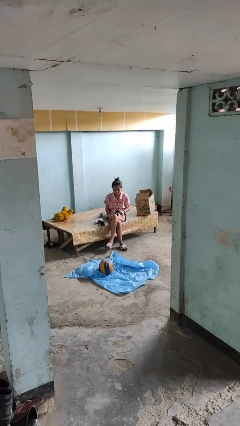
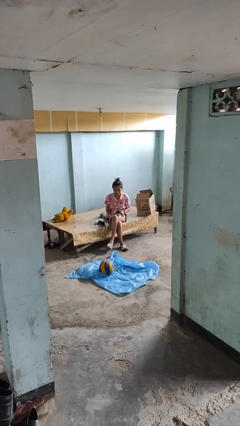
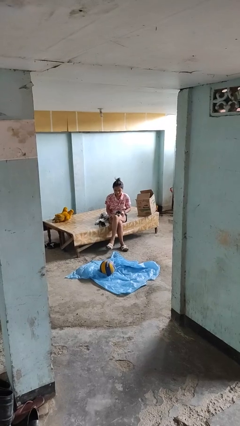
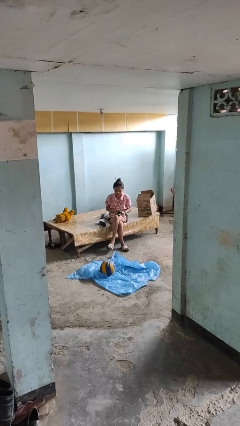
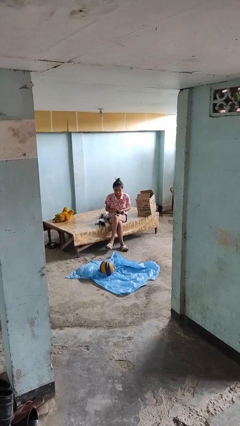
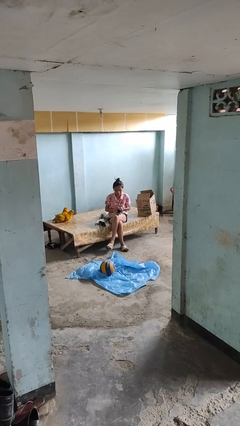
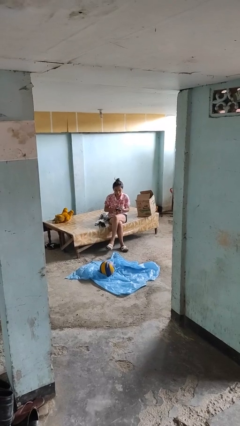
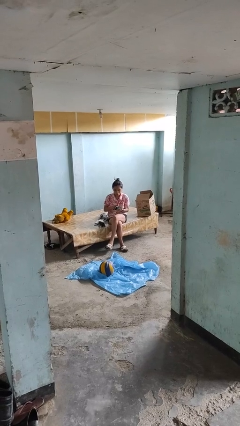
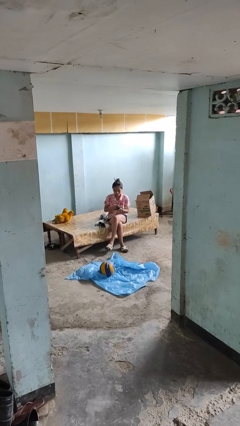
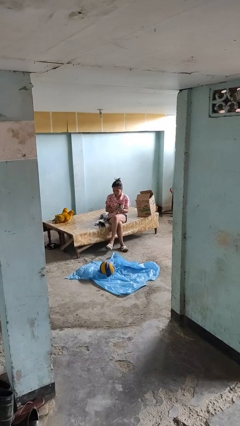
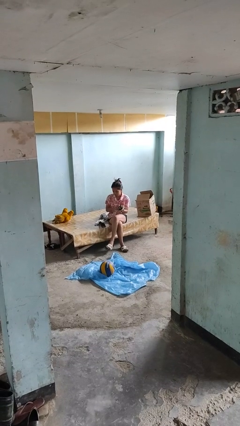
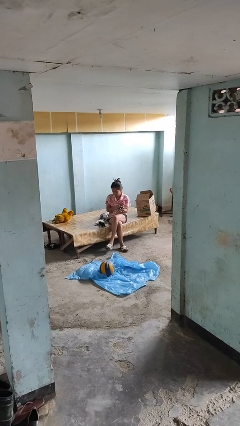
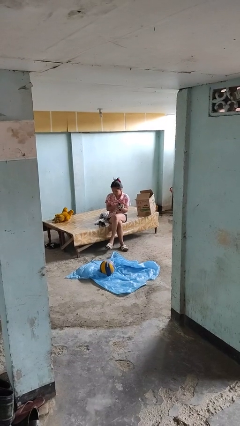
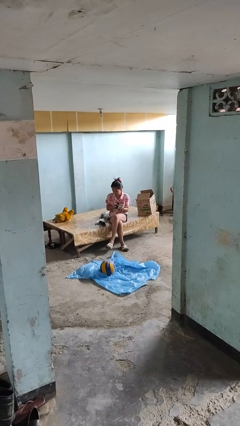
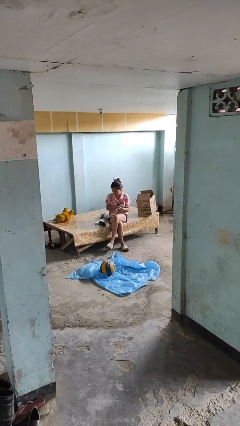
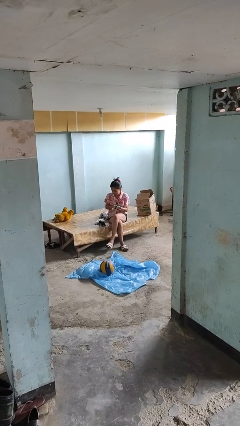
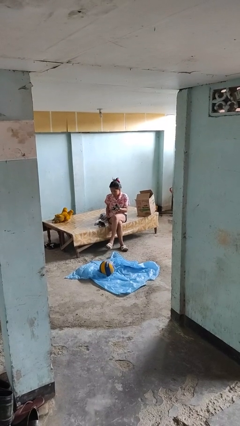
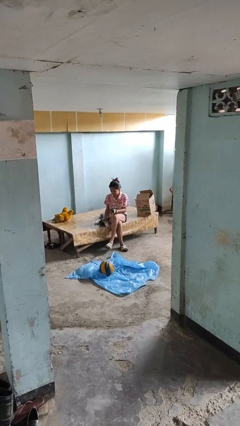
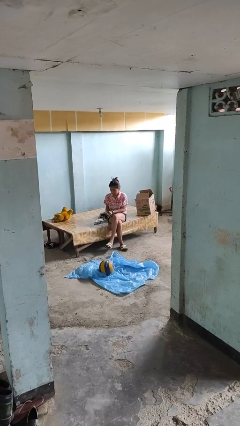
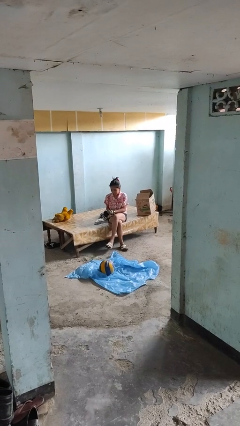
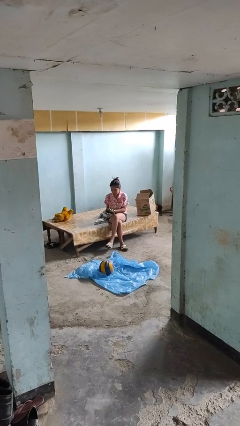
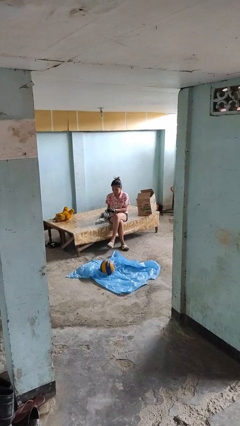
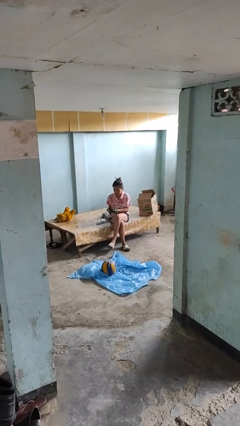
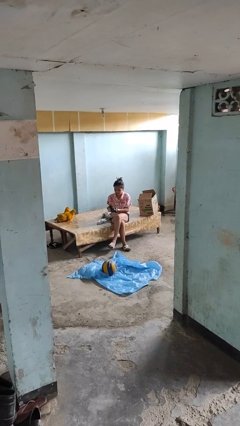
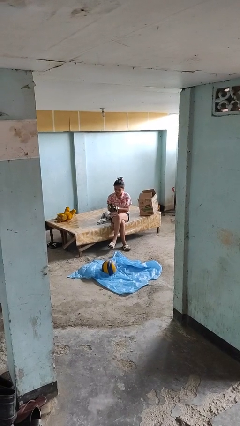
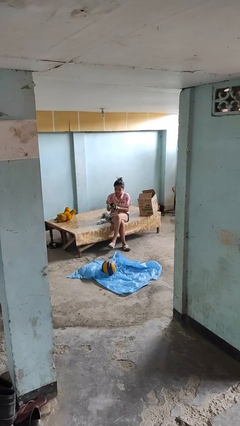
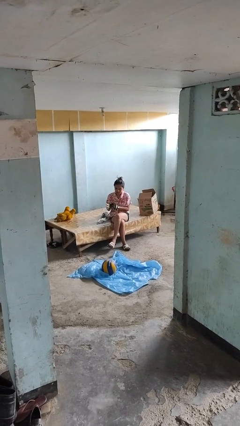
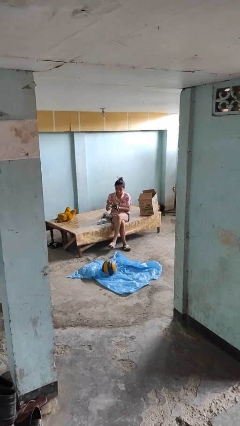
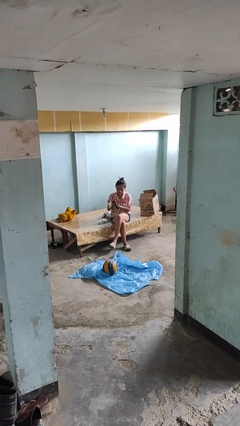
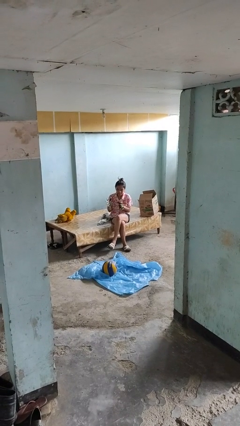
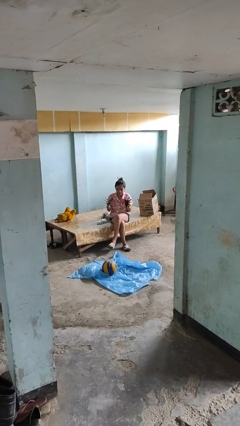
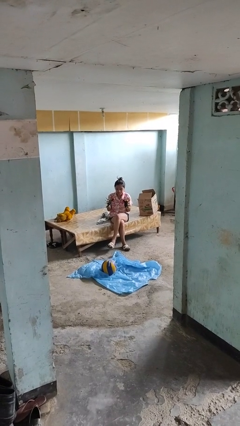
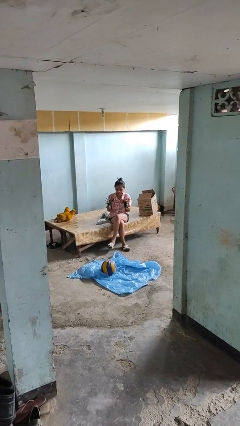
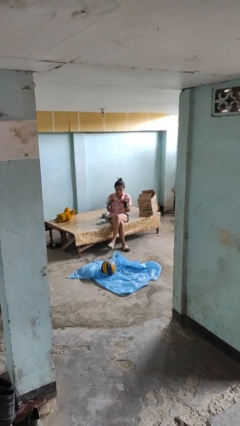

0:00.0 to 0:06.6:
person puts on gloves

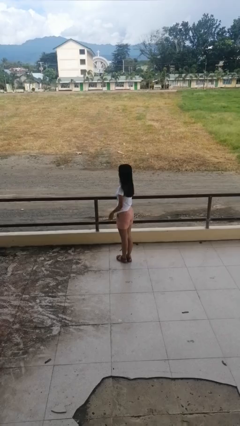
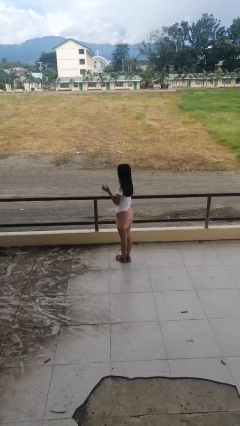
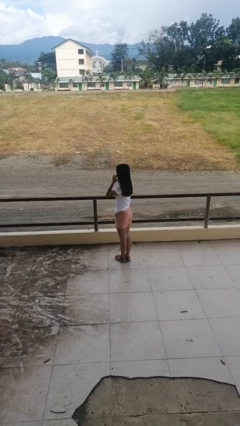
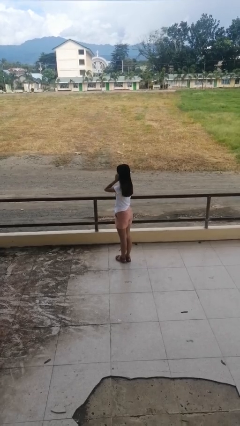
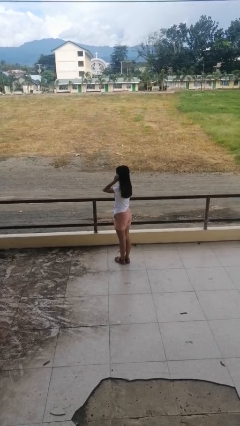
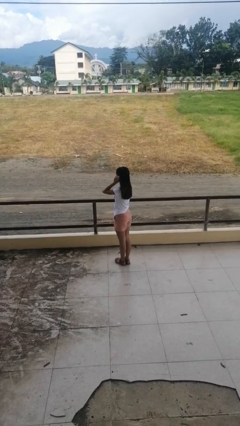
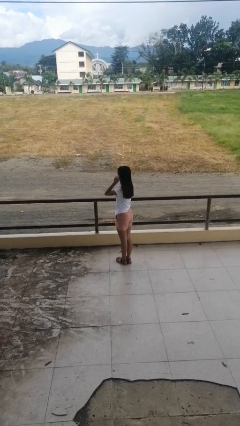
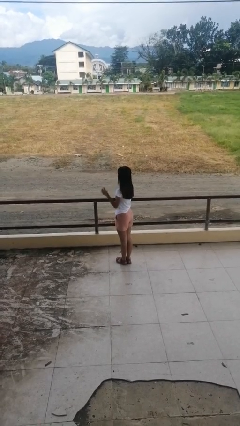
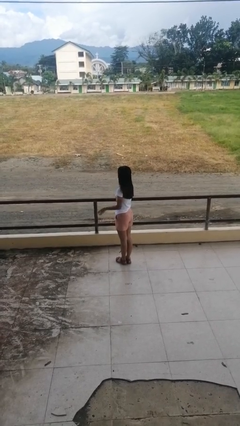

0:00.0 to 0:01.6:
person touches earlobe

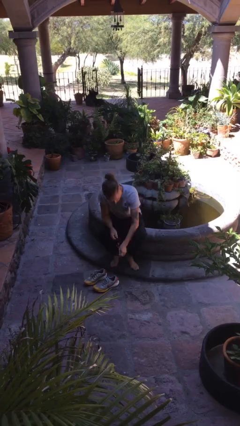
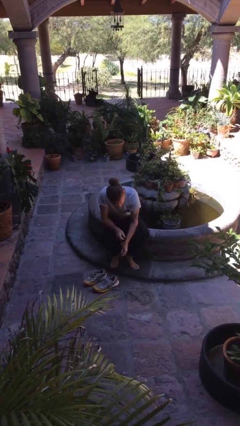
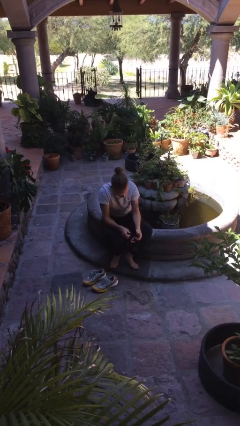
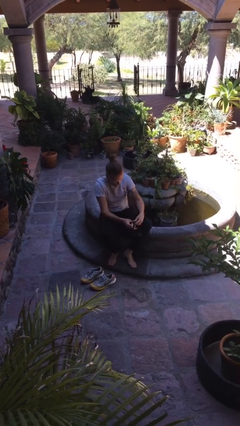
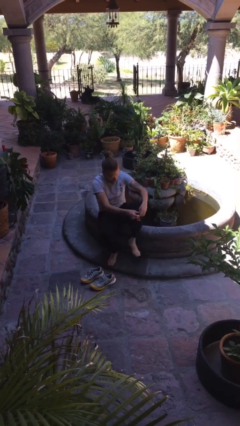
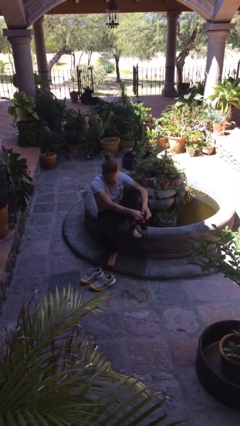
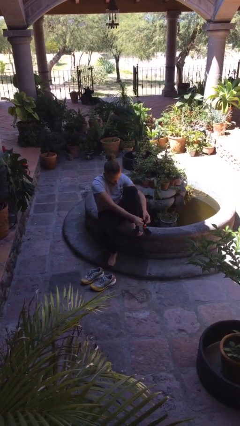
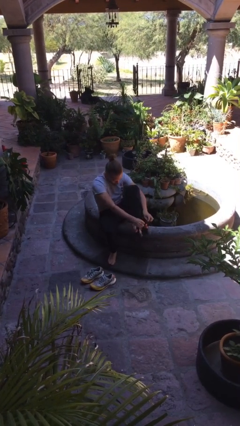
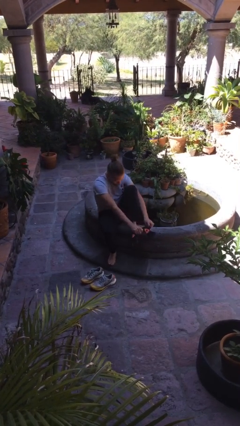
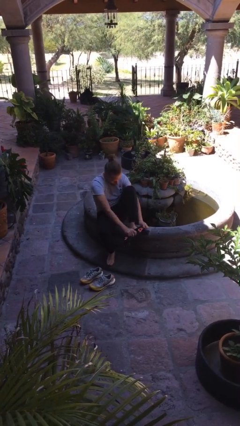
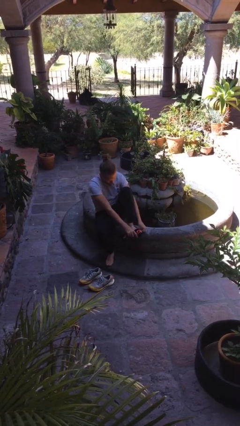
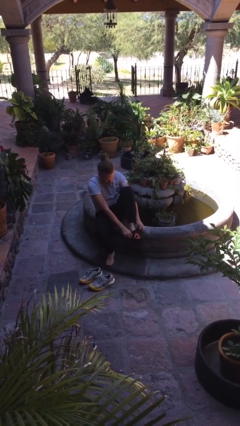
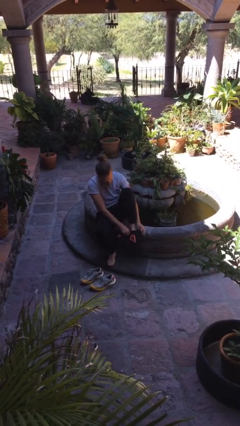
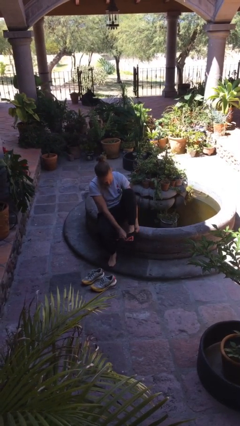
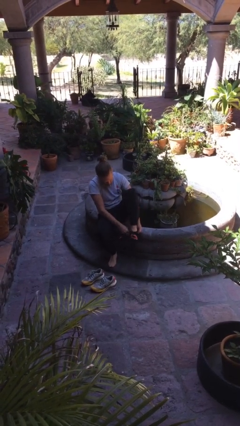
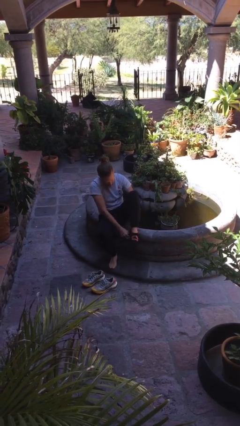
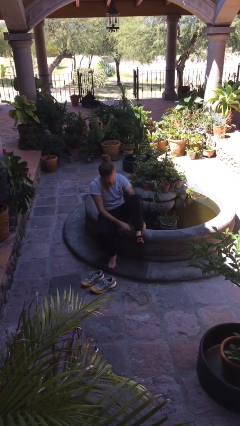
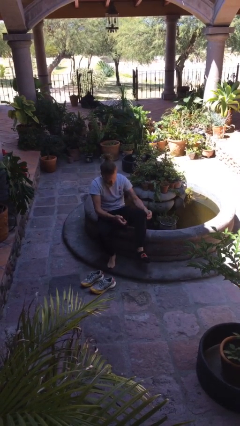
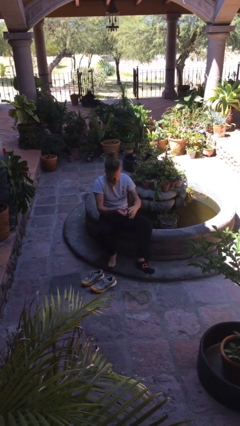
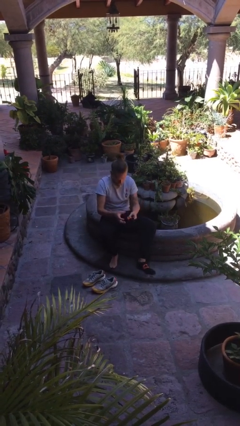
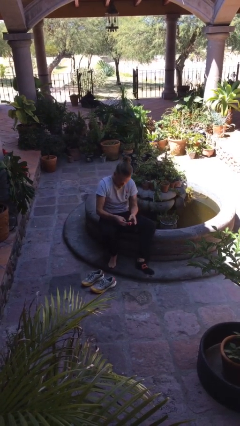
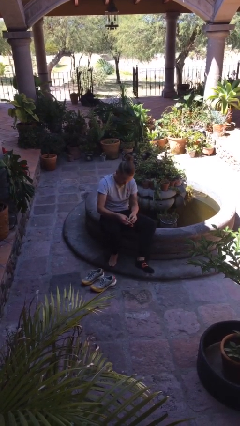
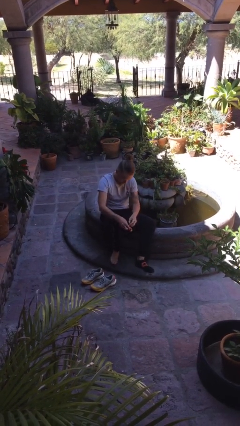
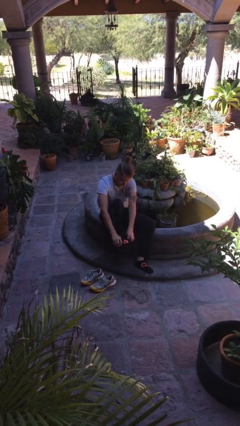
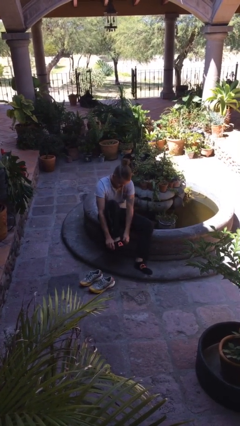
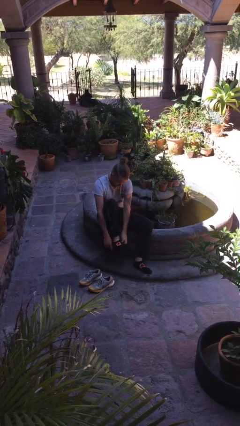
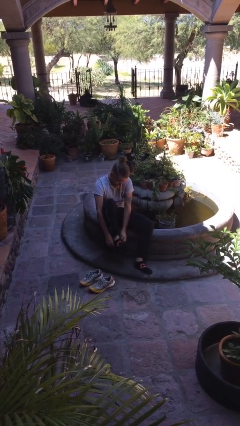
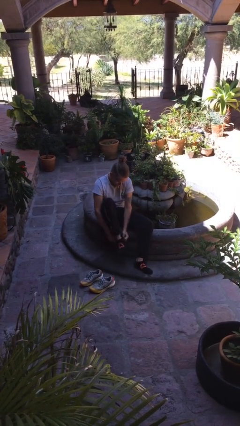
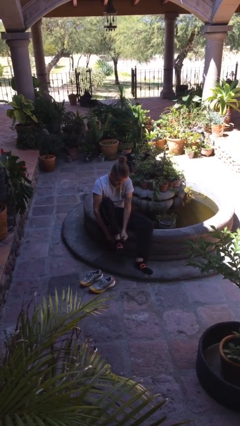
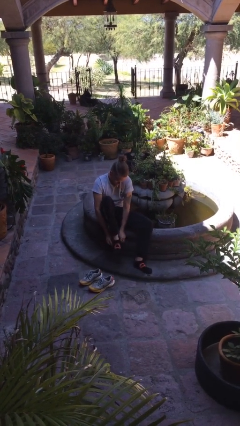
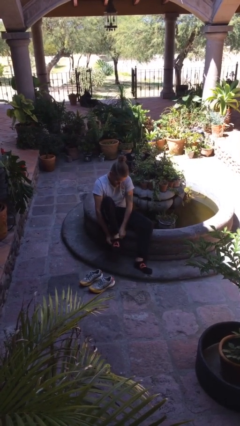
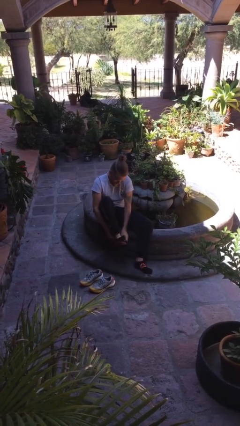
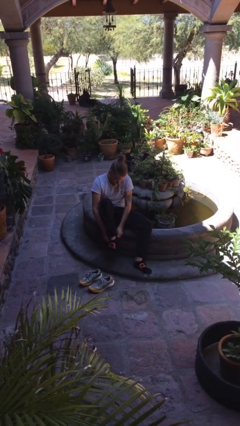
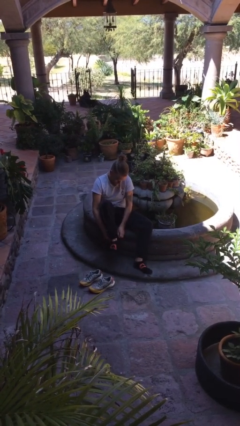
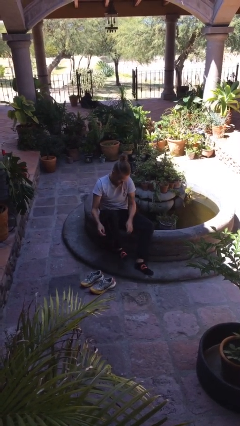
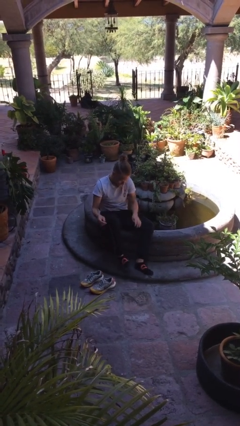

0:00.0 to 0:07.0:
person puts on socks

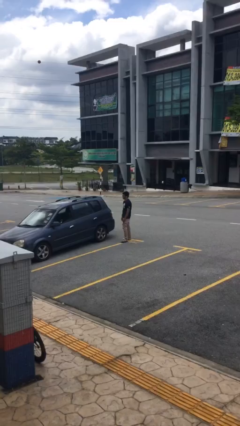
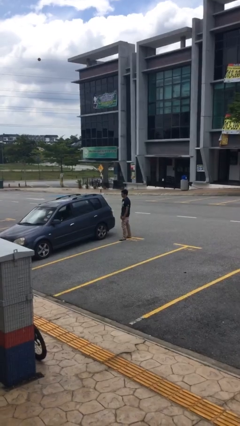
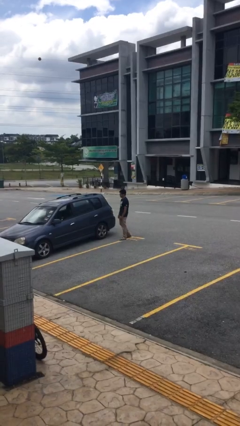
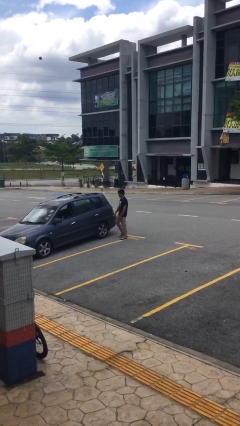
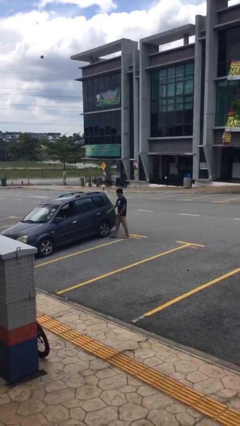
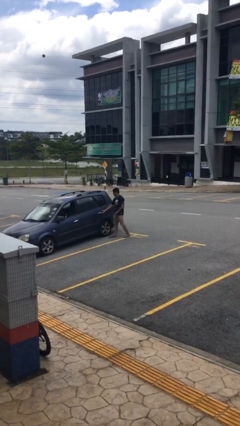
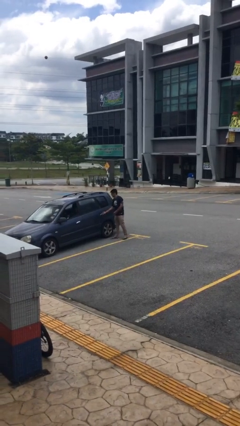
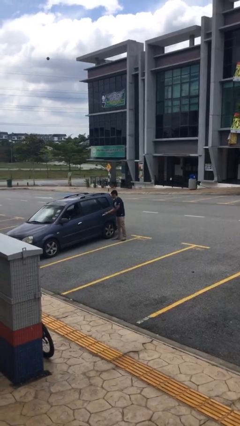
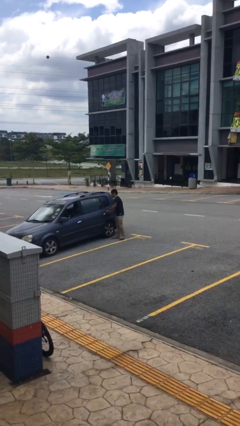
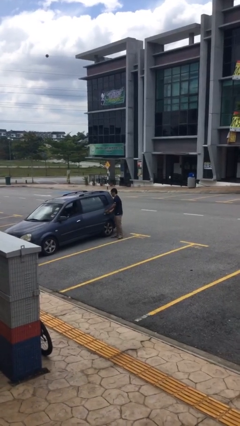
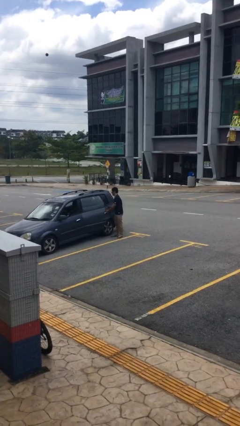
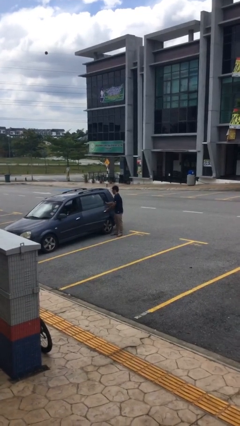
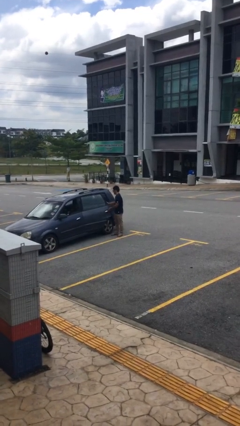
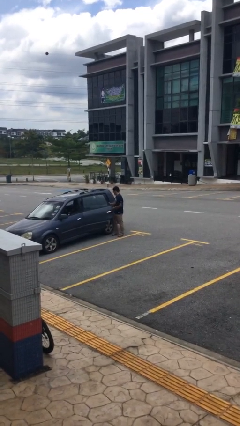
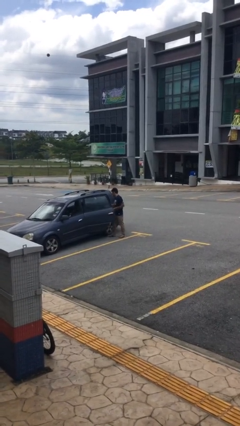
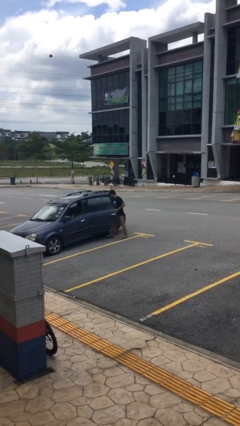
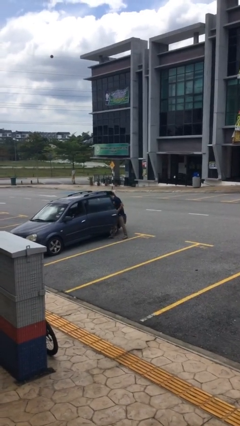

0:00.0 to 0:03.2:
person opens car door
